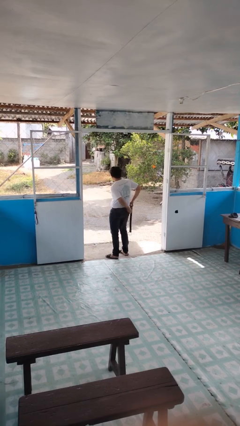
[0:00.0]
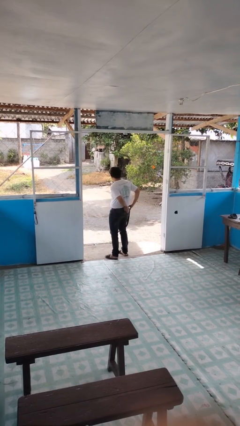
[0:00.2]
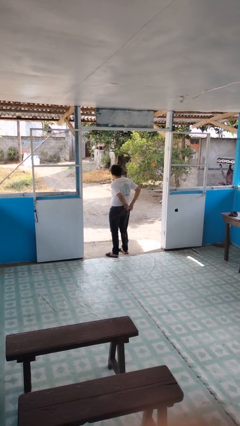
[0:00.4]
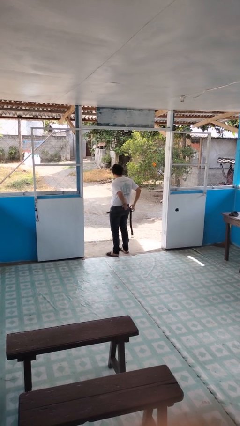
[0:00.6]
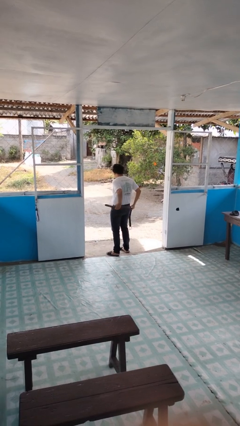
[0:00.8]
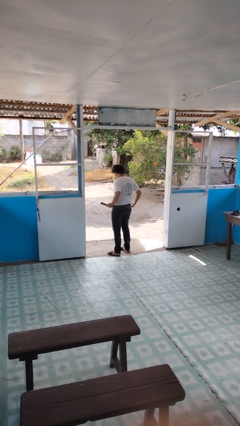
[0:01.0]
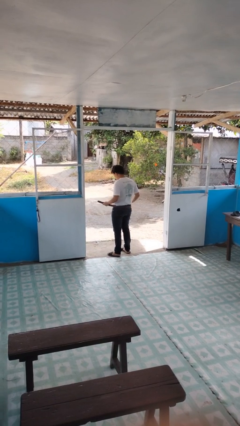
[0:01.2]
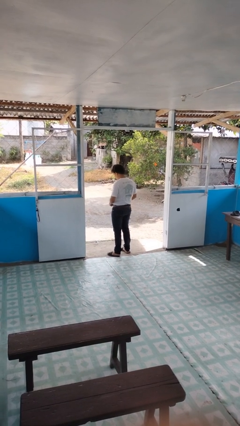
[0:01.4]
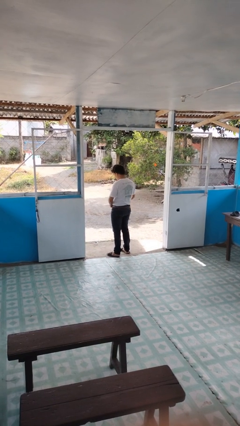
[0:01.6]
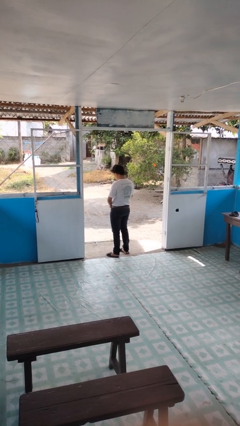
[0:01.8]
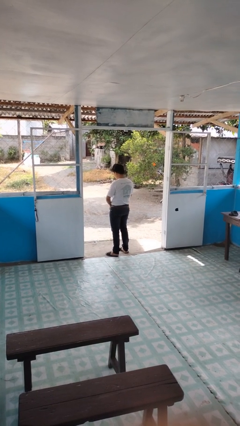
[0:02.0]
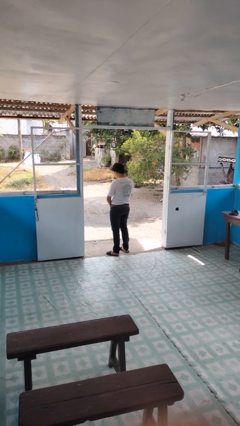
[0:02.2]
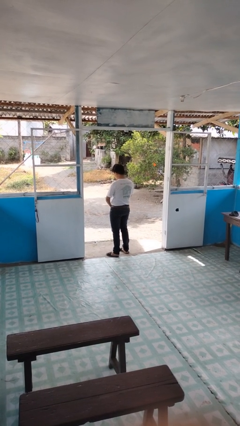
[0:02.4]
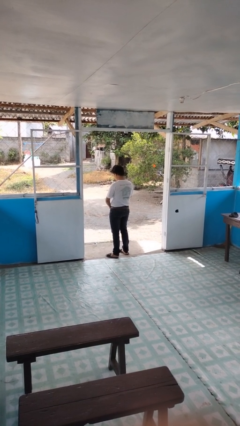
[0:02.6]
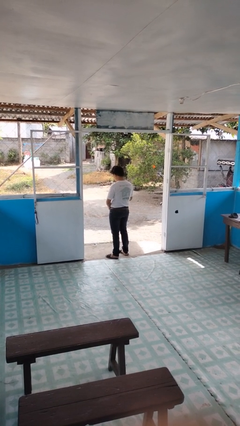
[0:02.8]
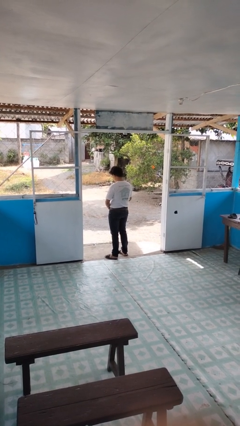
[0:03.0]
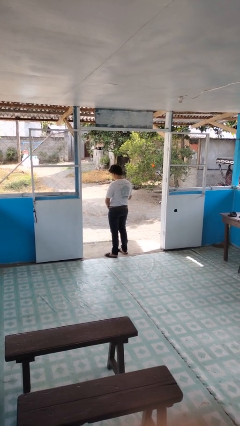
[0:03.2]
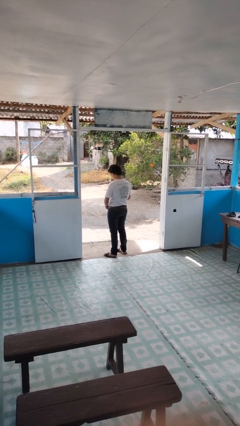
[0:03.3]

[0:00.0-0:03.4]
person puts on belt

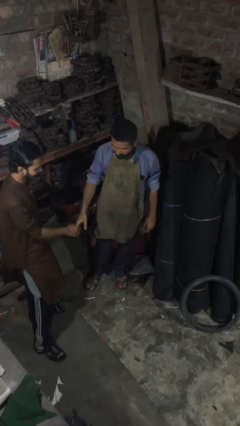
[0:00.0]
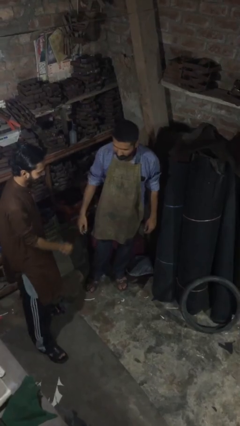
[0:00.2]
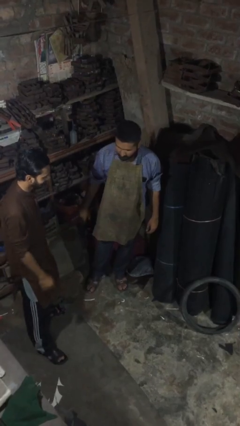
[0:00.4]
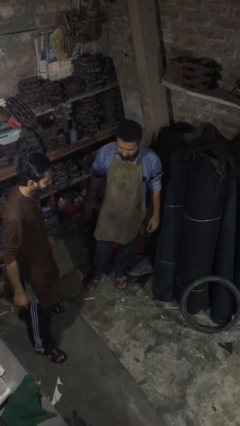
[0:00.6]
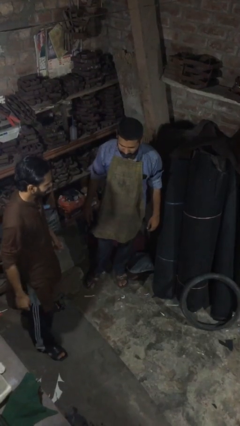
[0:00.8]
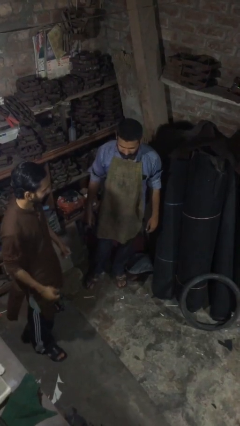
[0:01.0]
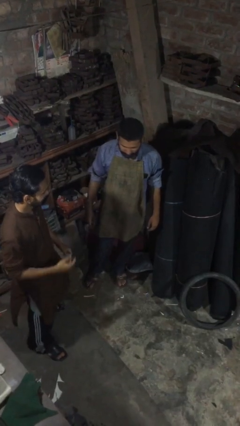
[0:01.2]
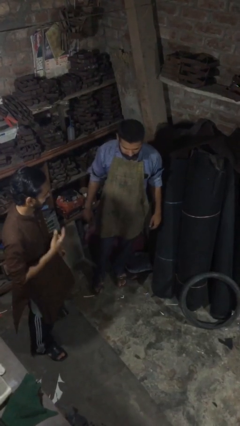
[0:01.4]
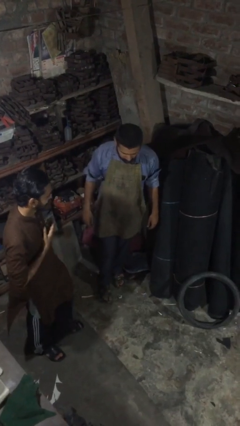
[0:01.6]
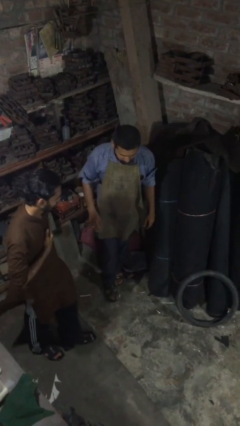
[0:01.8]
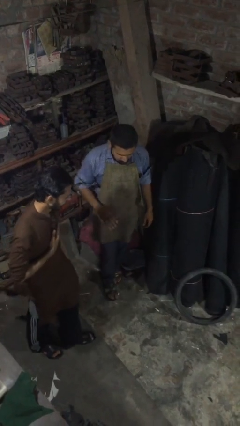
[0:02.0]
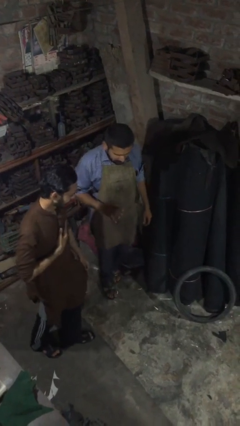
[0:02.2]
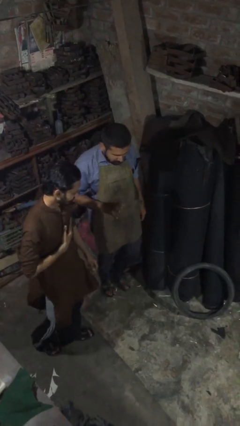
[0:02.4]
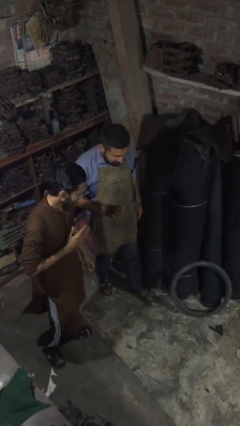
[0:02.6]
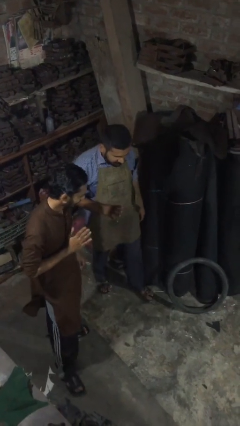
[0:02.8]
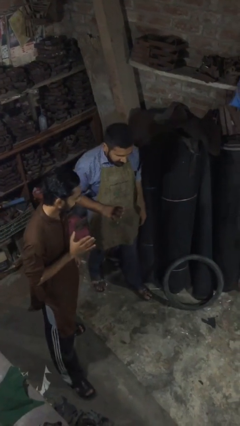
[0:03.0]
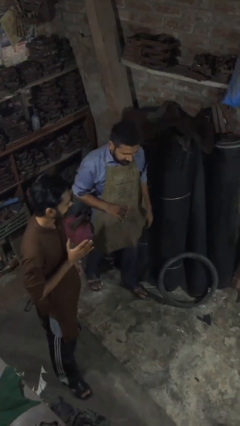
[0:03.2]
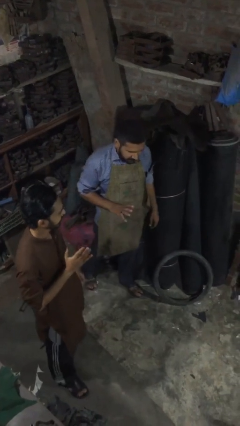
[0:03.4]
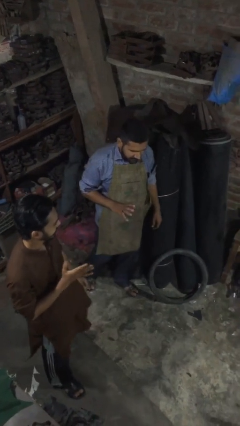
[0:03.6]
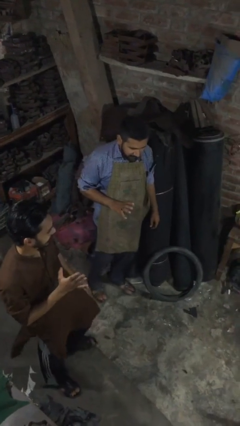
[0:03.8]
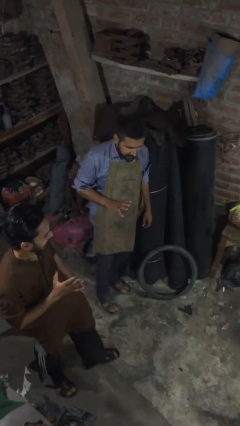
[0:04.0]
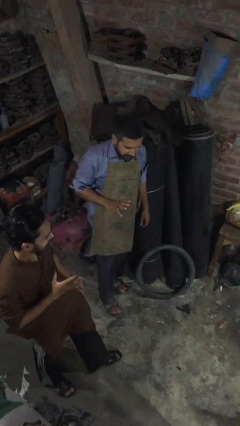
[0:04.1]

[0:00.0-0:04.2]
person talks to person

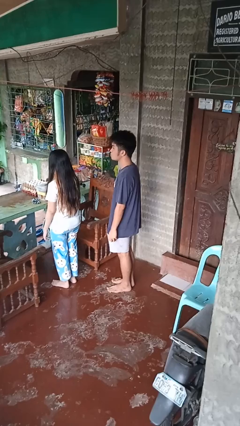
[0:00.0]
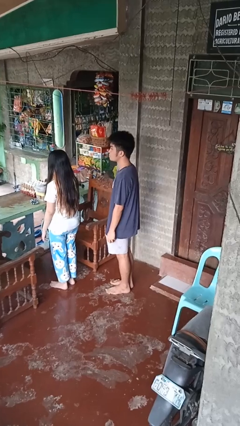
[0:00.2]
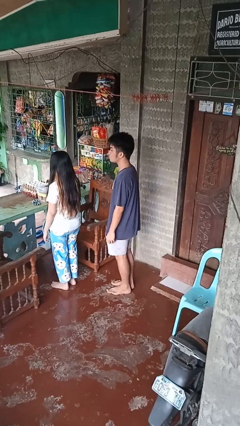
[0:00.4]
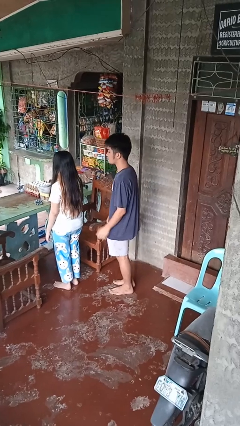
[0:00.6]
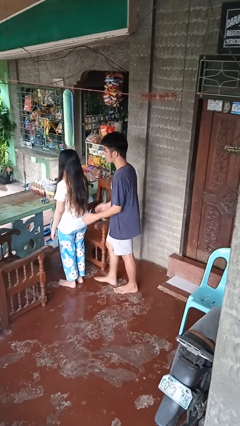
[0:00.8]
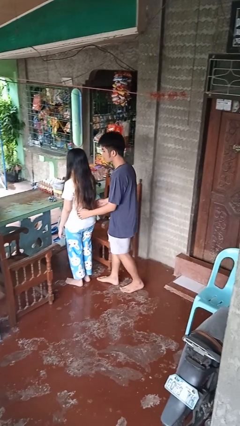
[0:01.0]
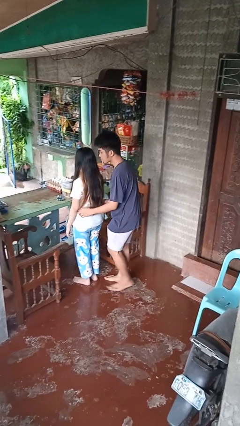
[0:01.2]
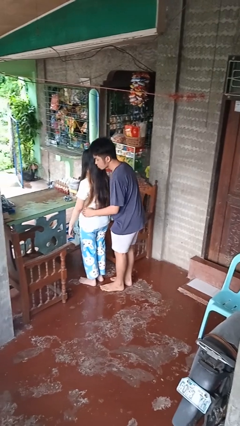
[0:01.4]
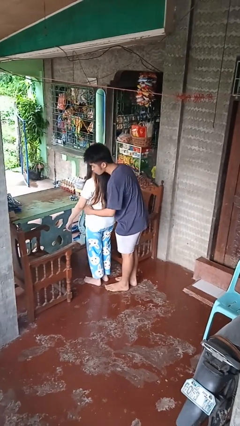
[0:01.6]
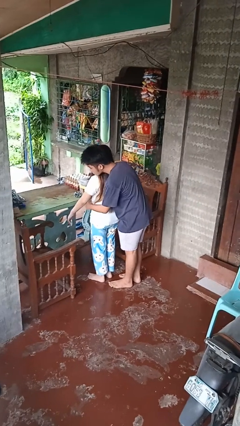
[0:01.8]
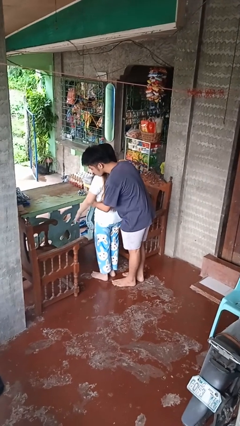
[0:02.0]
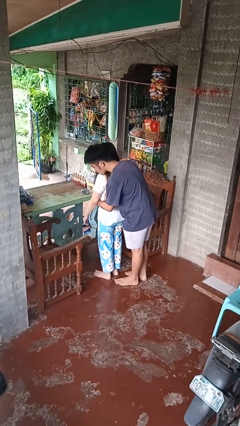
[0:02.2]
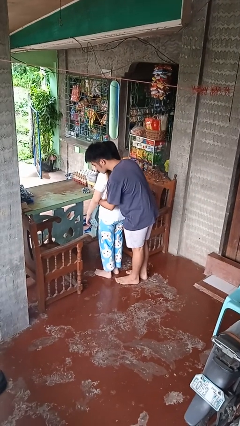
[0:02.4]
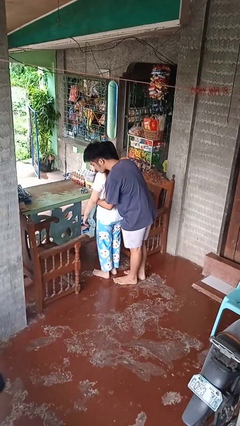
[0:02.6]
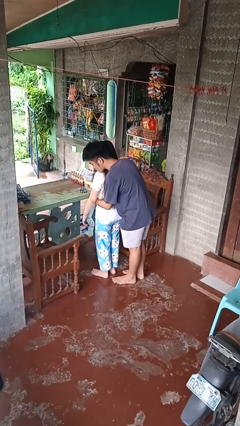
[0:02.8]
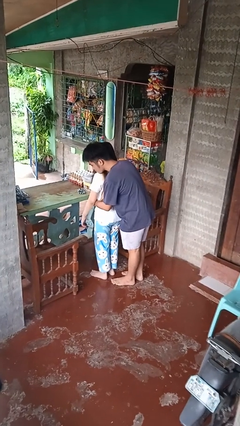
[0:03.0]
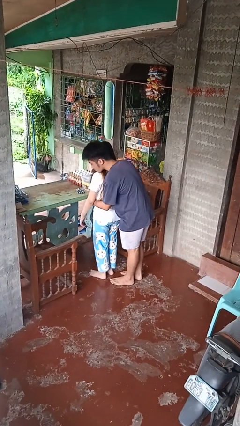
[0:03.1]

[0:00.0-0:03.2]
person hugs person from behind

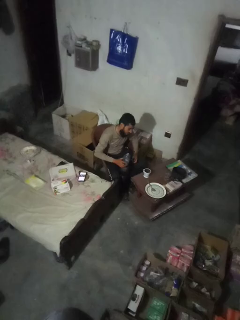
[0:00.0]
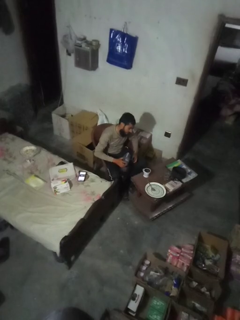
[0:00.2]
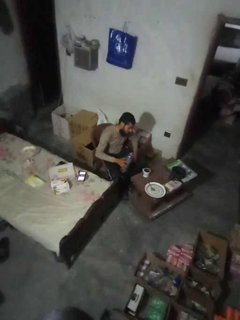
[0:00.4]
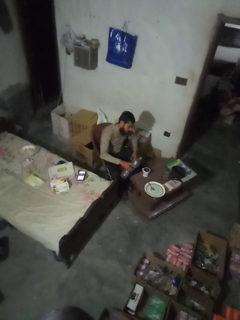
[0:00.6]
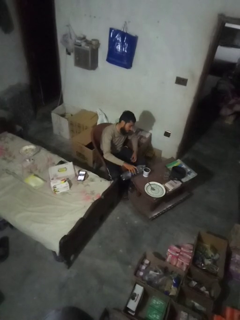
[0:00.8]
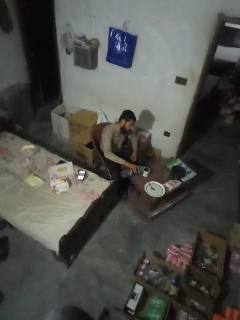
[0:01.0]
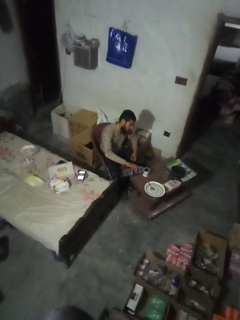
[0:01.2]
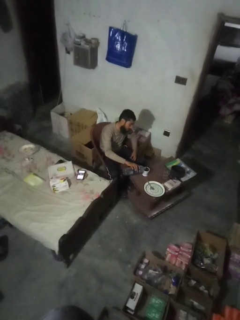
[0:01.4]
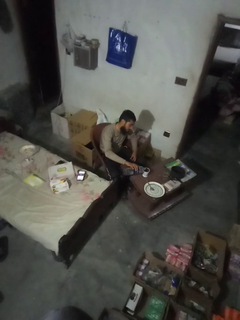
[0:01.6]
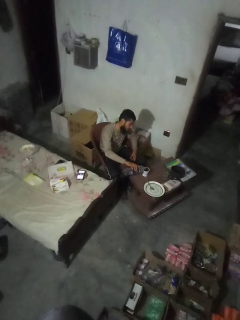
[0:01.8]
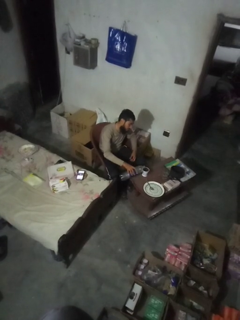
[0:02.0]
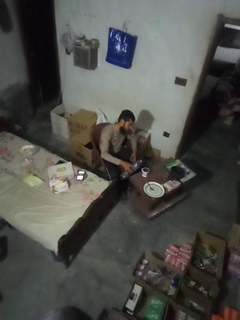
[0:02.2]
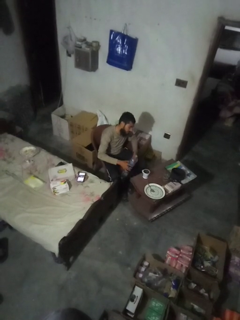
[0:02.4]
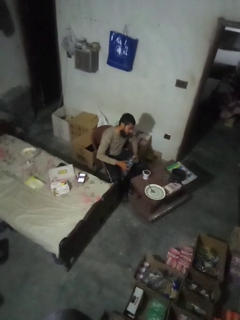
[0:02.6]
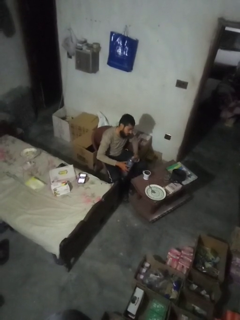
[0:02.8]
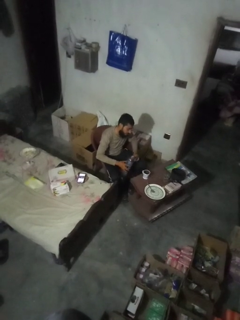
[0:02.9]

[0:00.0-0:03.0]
person pours liquid into cup

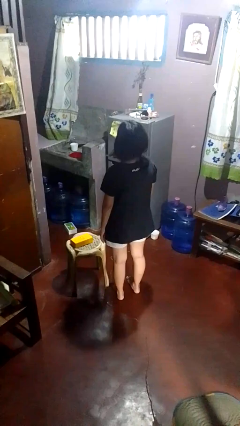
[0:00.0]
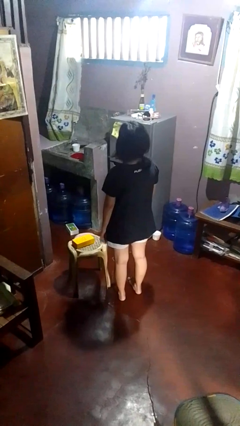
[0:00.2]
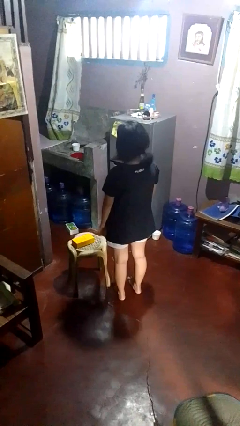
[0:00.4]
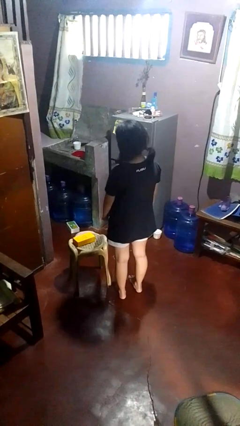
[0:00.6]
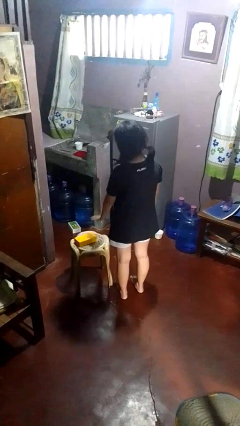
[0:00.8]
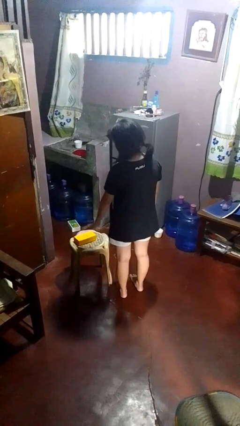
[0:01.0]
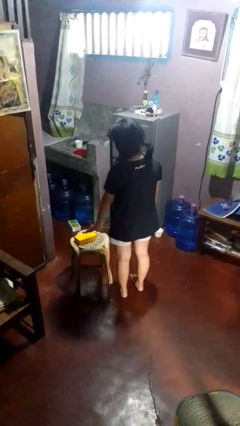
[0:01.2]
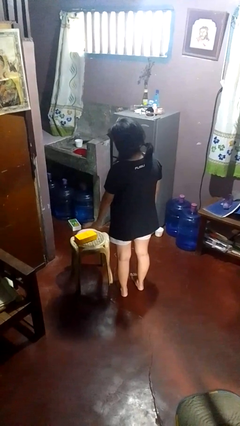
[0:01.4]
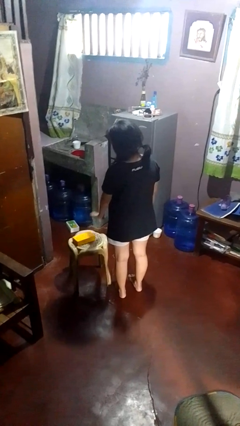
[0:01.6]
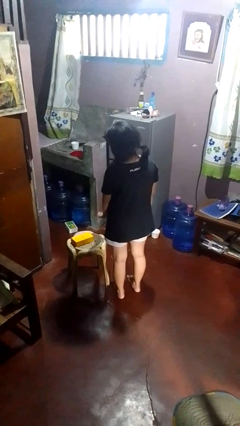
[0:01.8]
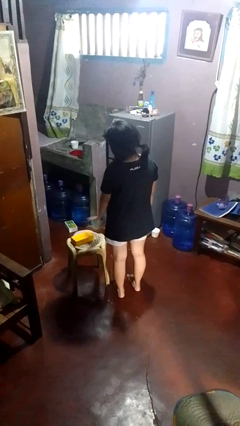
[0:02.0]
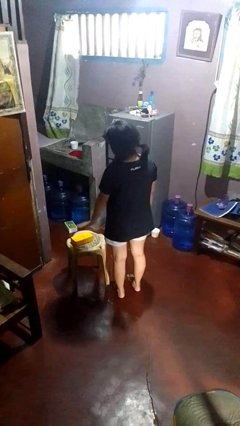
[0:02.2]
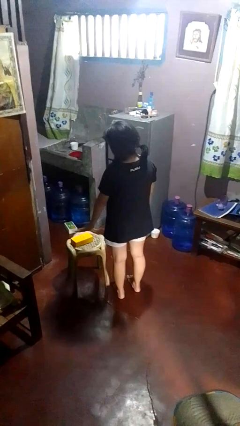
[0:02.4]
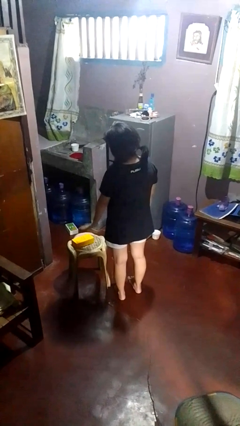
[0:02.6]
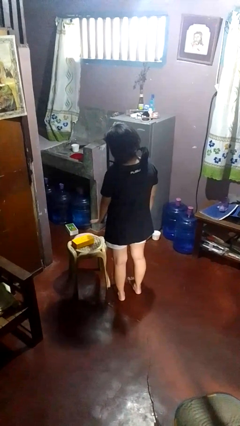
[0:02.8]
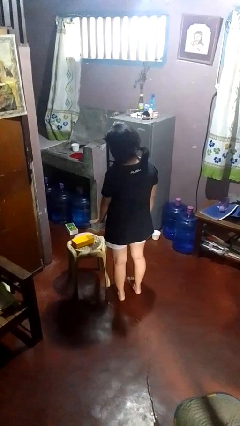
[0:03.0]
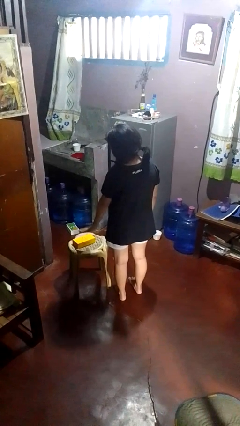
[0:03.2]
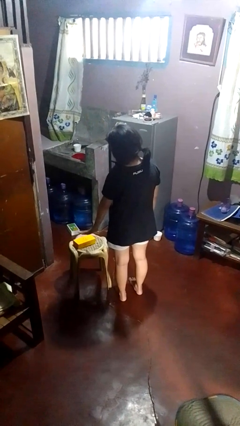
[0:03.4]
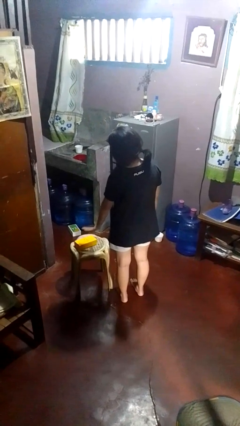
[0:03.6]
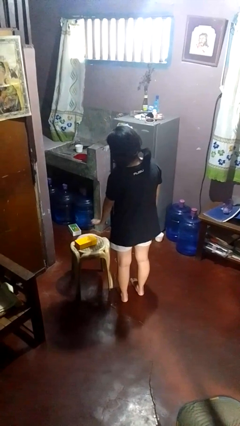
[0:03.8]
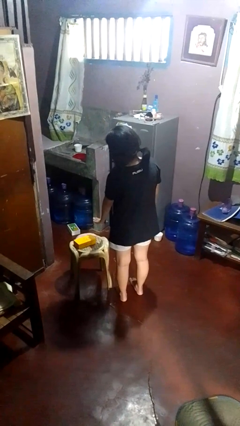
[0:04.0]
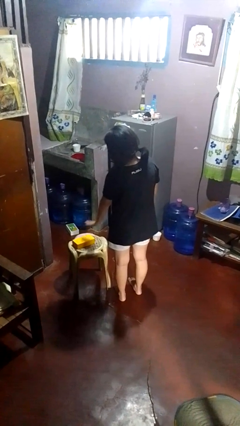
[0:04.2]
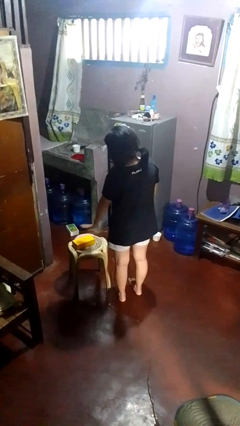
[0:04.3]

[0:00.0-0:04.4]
person waves hand over object
